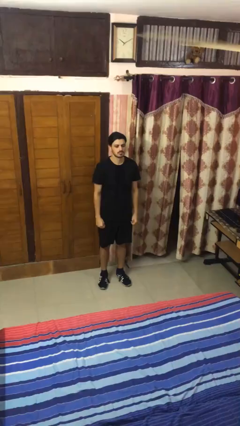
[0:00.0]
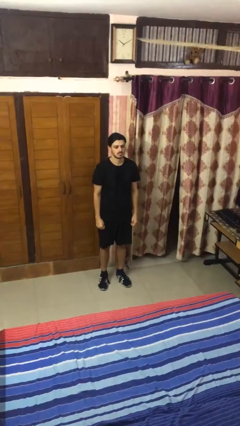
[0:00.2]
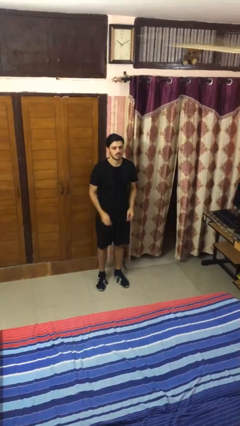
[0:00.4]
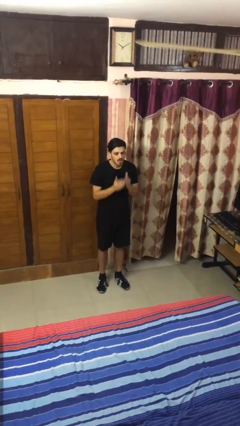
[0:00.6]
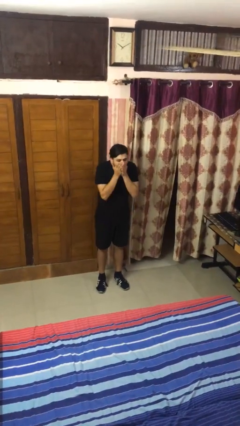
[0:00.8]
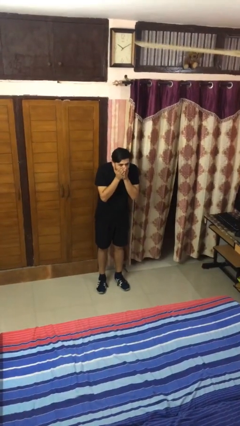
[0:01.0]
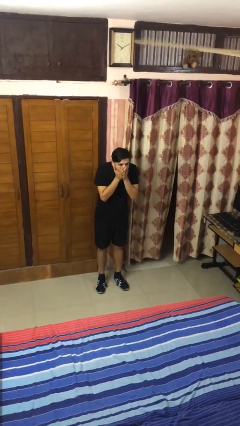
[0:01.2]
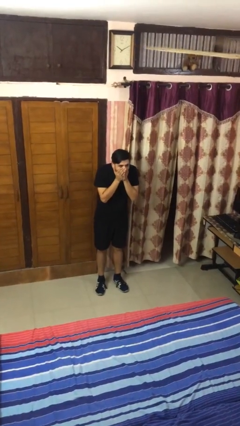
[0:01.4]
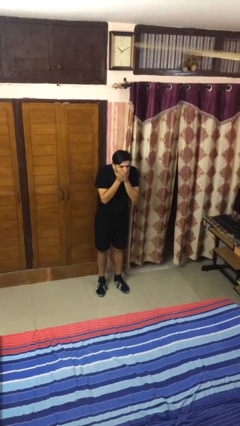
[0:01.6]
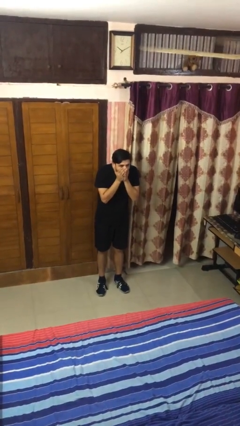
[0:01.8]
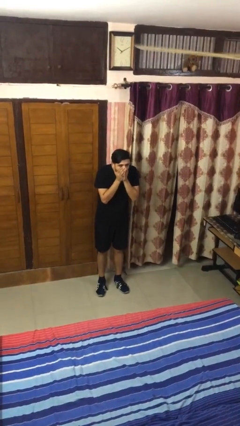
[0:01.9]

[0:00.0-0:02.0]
person covers face with hands

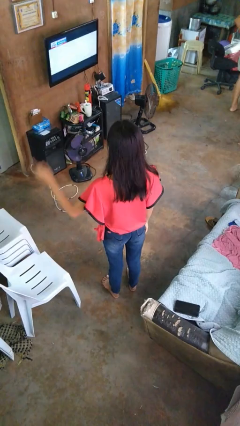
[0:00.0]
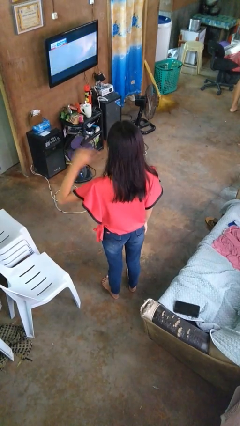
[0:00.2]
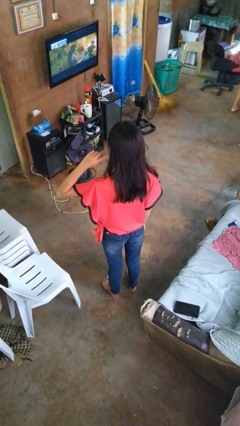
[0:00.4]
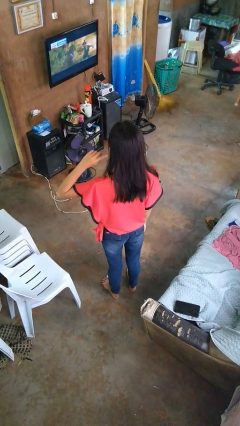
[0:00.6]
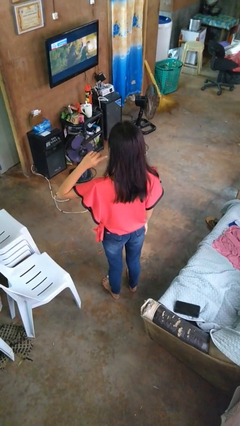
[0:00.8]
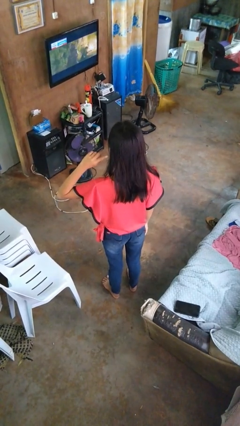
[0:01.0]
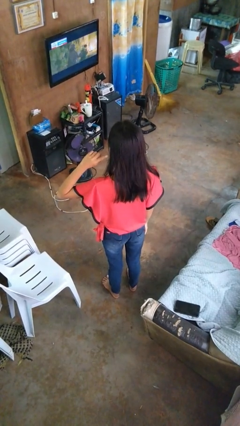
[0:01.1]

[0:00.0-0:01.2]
person gestures listen closely

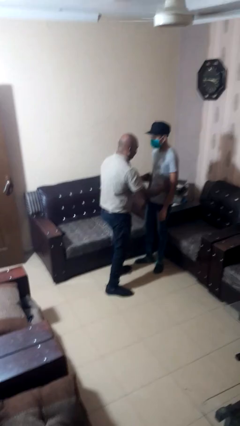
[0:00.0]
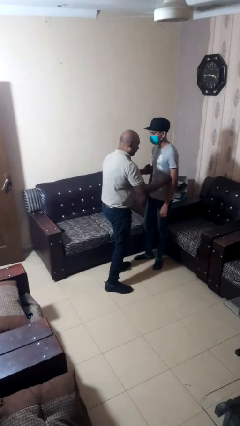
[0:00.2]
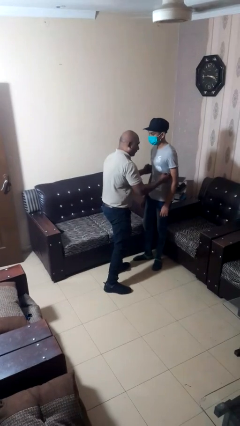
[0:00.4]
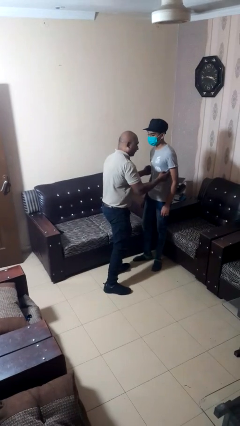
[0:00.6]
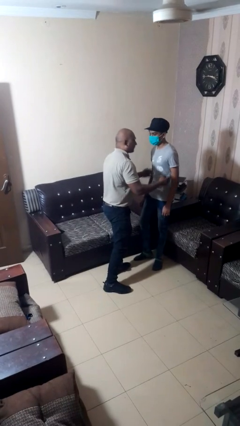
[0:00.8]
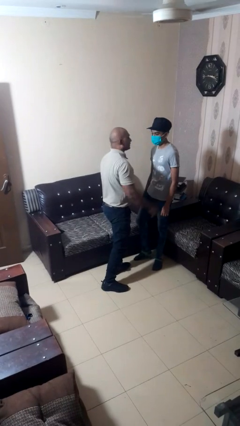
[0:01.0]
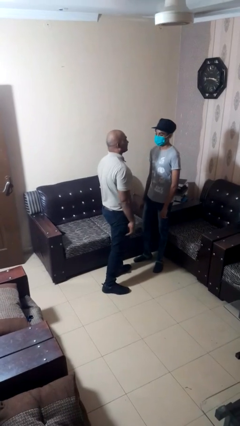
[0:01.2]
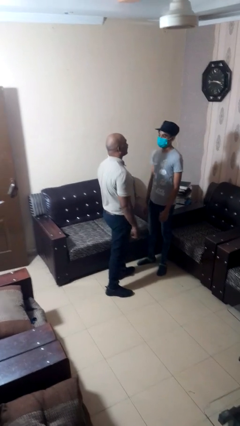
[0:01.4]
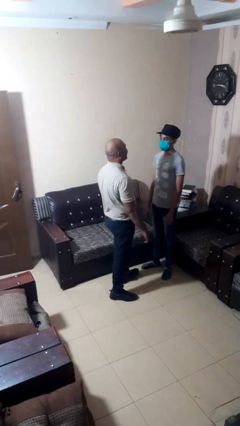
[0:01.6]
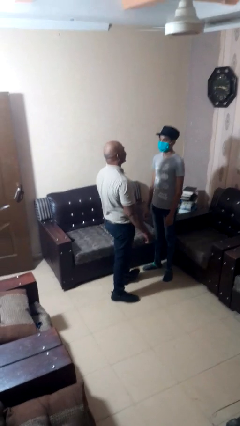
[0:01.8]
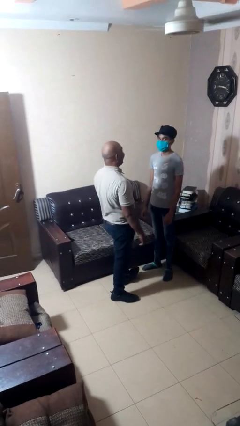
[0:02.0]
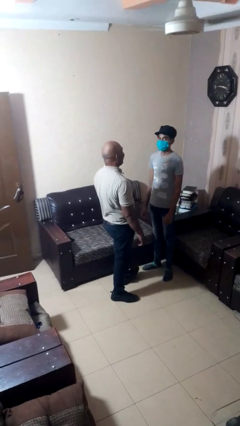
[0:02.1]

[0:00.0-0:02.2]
person tickles person

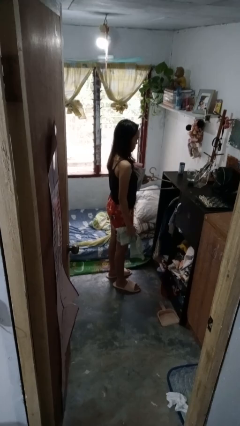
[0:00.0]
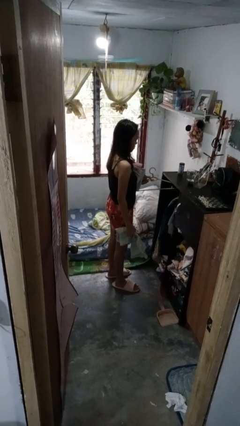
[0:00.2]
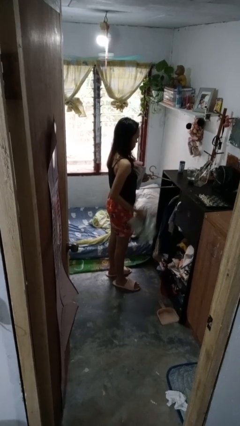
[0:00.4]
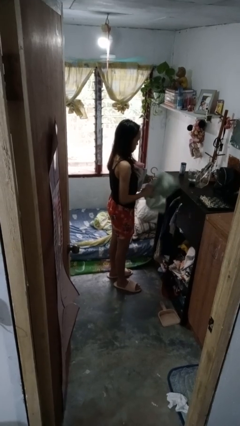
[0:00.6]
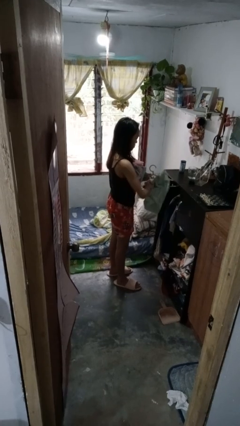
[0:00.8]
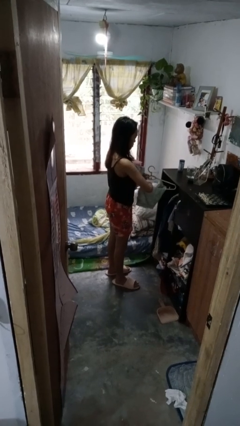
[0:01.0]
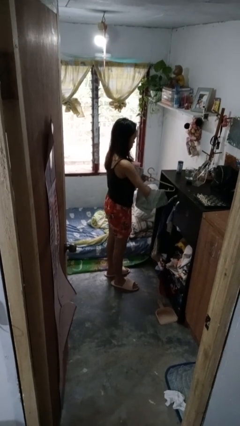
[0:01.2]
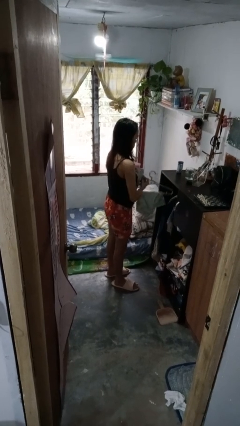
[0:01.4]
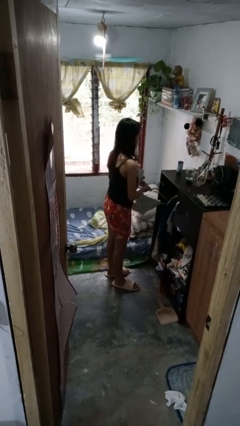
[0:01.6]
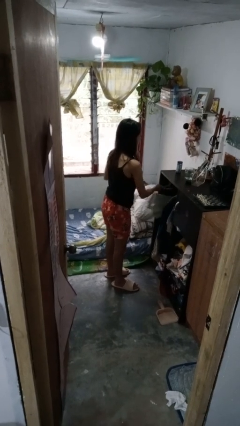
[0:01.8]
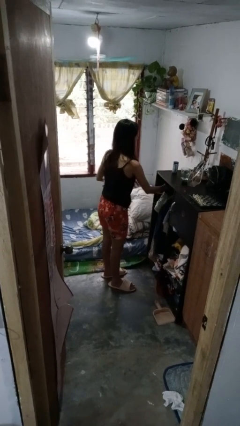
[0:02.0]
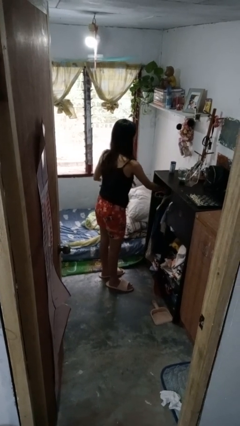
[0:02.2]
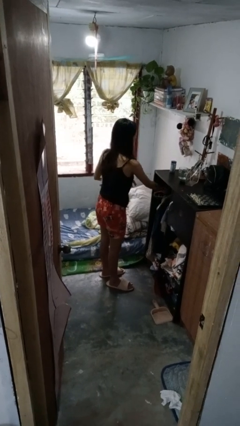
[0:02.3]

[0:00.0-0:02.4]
person puts clothes into closet

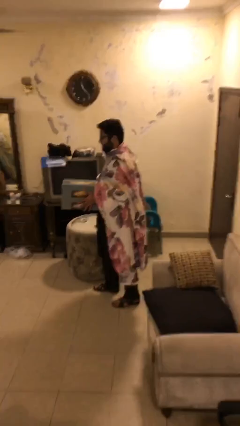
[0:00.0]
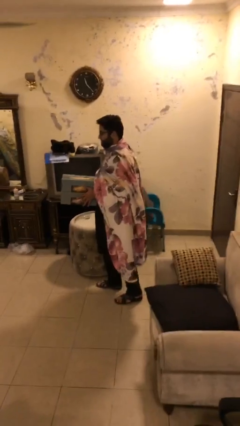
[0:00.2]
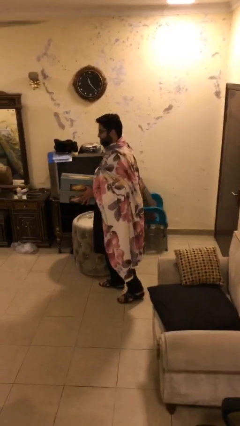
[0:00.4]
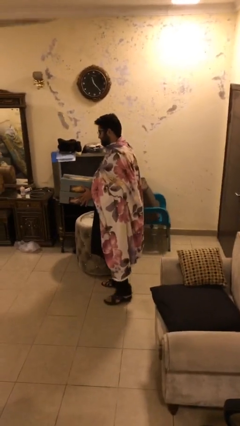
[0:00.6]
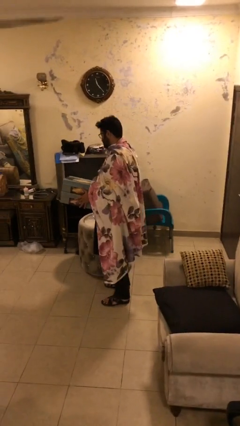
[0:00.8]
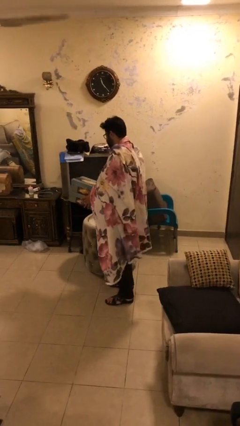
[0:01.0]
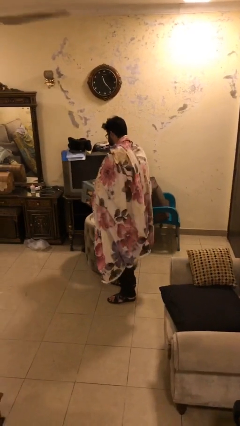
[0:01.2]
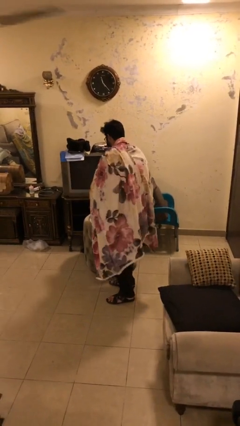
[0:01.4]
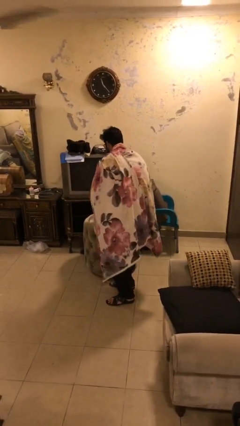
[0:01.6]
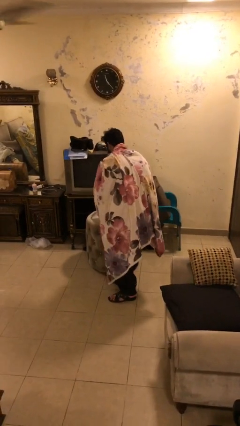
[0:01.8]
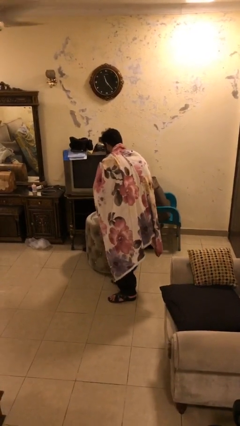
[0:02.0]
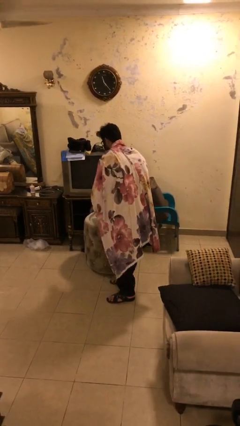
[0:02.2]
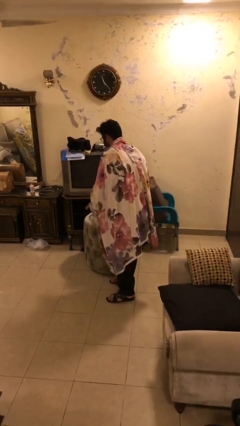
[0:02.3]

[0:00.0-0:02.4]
person puts down object on table

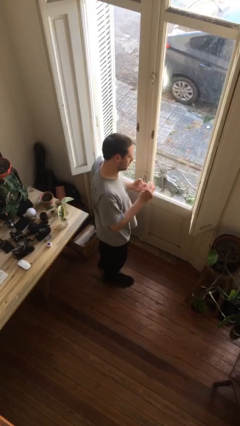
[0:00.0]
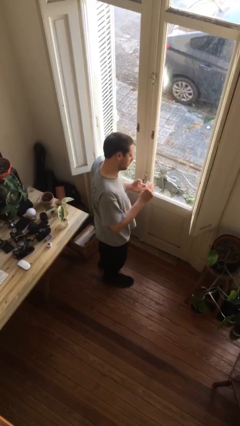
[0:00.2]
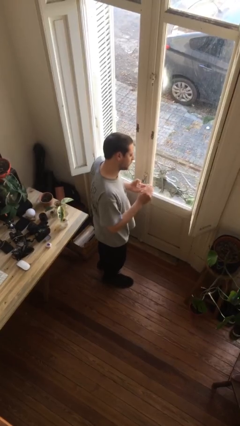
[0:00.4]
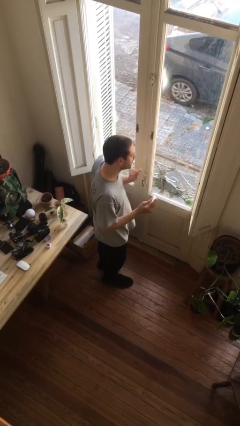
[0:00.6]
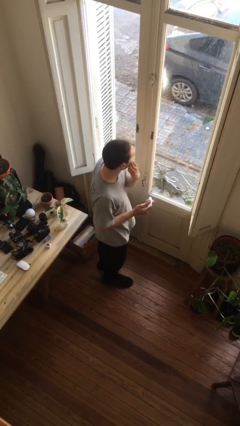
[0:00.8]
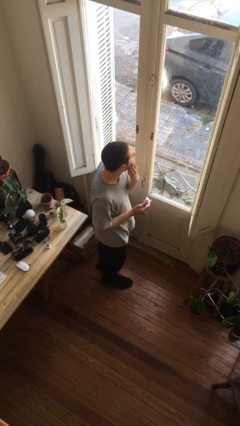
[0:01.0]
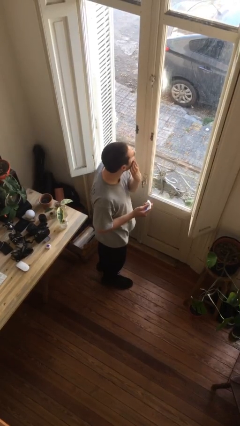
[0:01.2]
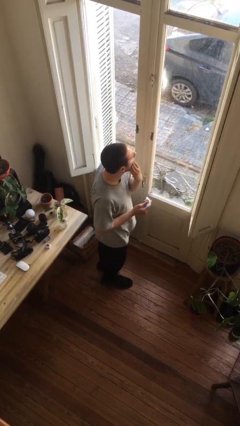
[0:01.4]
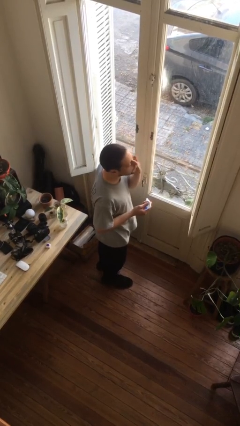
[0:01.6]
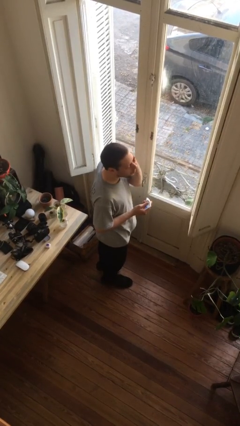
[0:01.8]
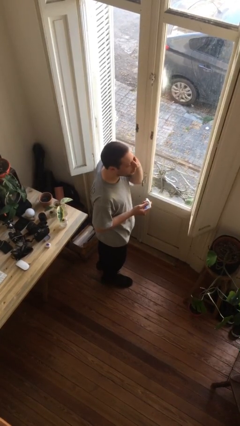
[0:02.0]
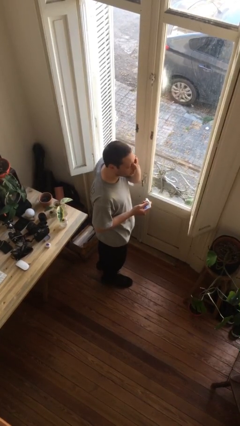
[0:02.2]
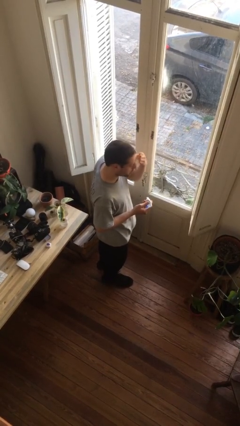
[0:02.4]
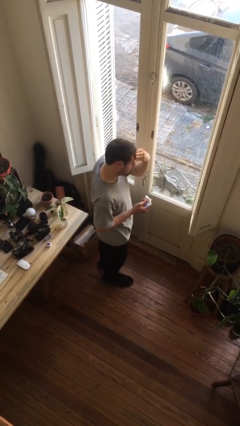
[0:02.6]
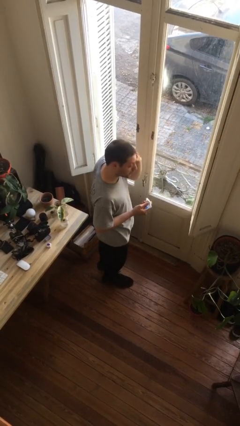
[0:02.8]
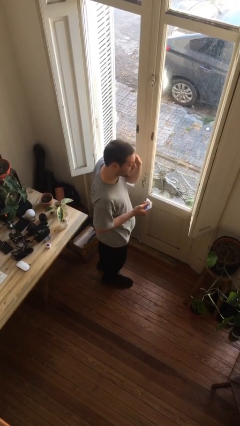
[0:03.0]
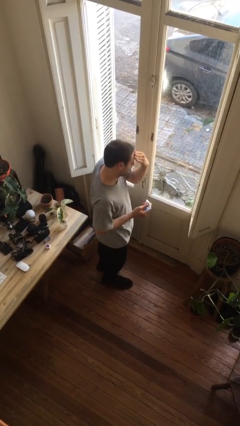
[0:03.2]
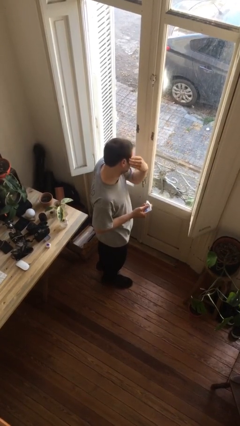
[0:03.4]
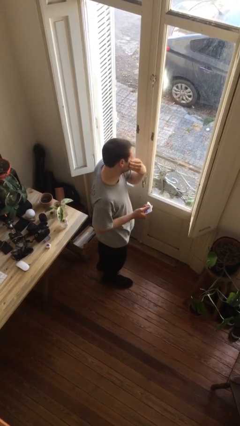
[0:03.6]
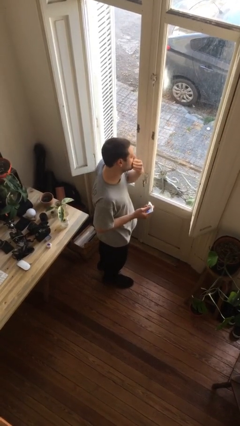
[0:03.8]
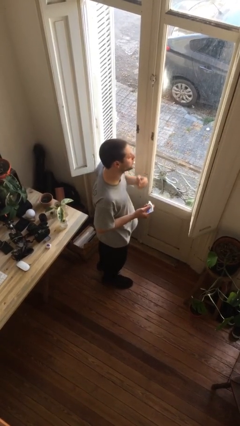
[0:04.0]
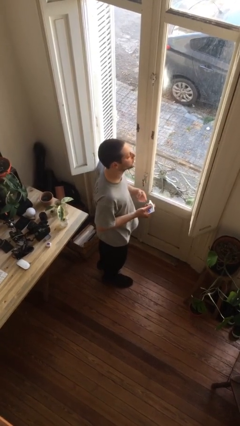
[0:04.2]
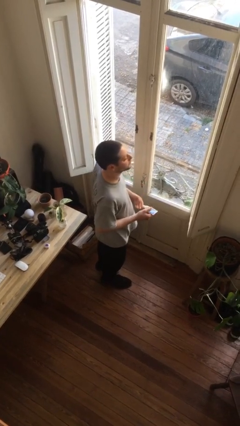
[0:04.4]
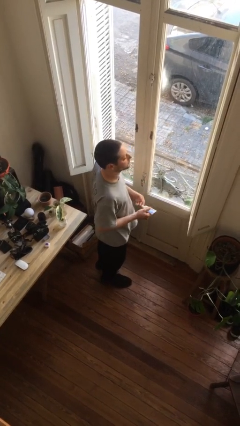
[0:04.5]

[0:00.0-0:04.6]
person applies facial moisturizer

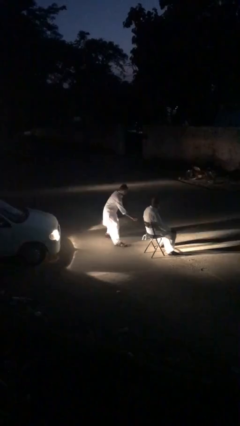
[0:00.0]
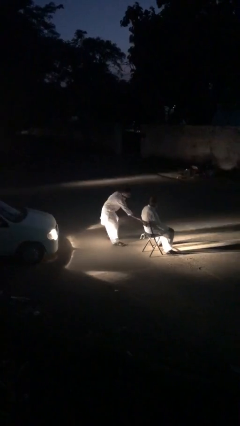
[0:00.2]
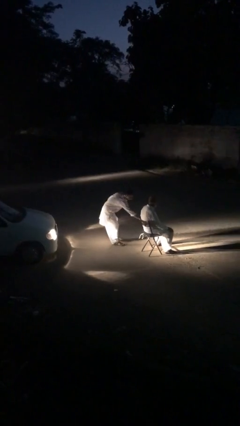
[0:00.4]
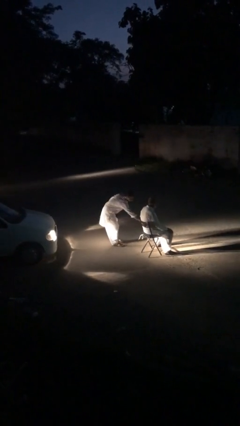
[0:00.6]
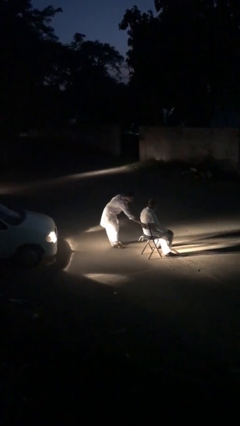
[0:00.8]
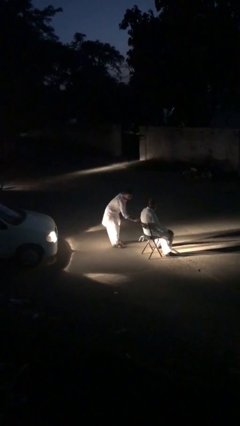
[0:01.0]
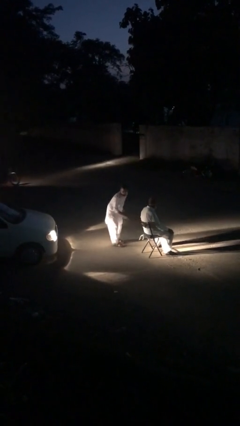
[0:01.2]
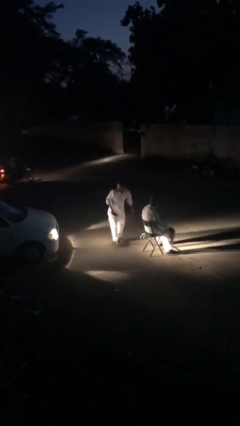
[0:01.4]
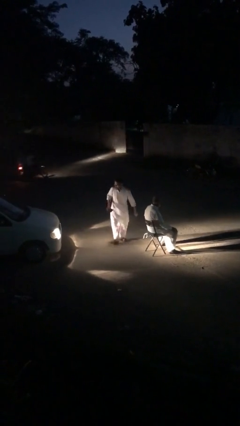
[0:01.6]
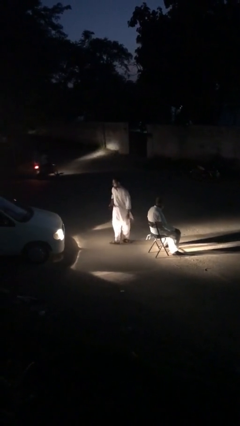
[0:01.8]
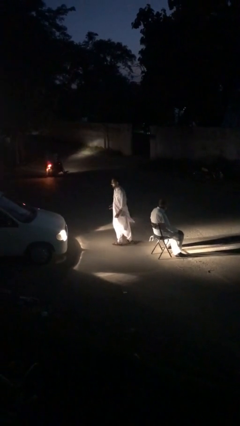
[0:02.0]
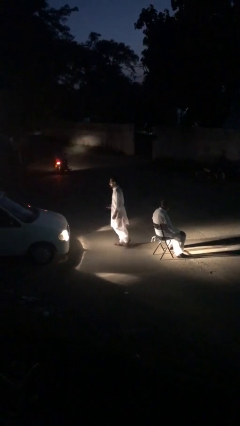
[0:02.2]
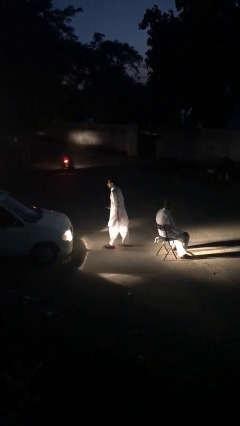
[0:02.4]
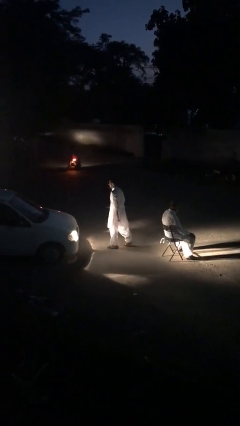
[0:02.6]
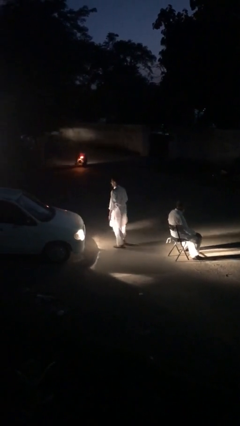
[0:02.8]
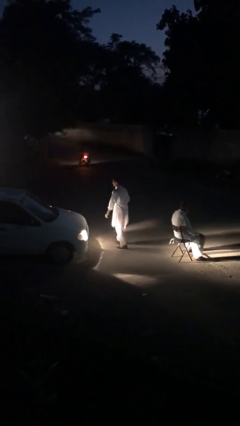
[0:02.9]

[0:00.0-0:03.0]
person steals object from person
